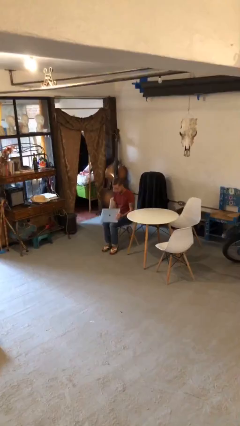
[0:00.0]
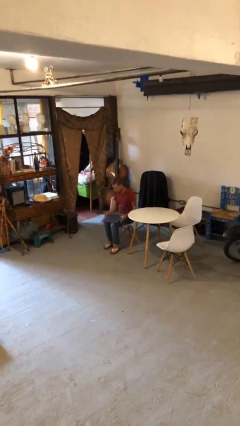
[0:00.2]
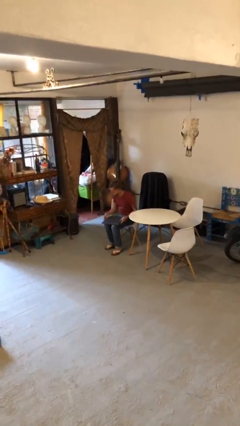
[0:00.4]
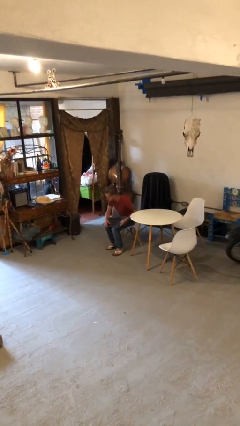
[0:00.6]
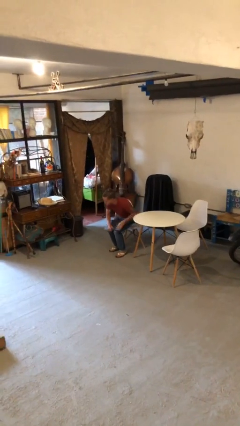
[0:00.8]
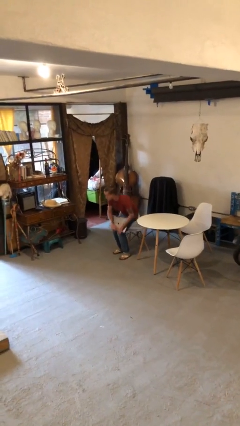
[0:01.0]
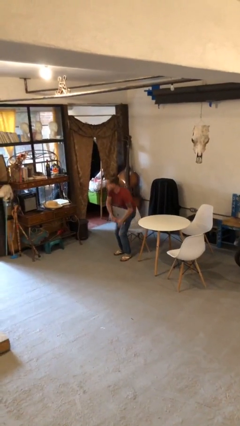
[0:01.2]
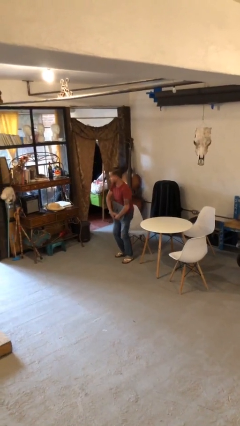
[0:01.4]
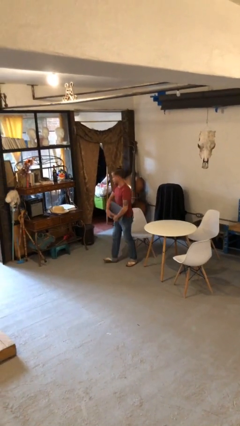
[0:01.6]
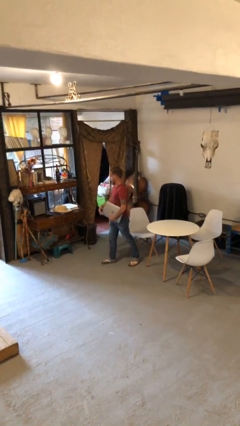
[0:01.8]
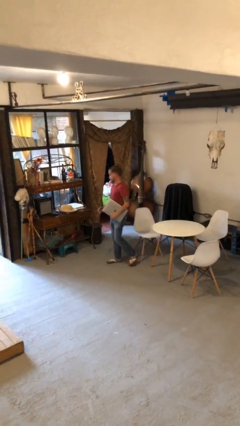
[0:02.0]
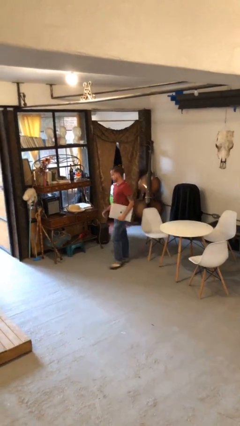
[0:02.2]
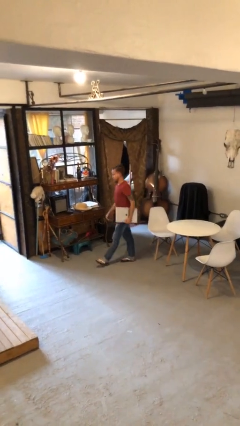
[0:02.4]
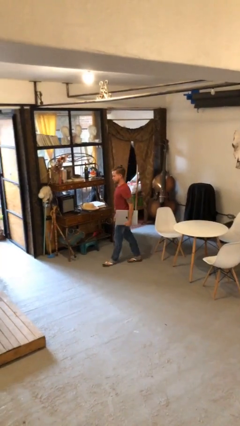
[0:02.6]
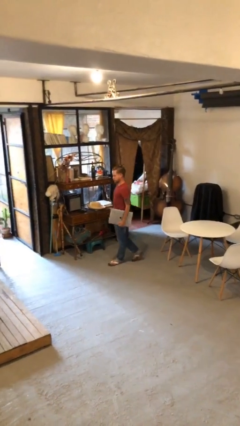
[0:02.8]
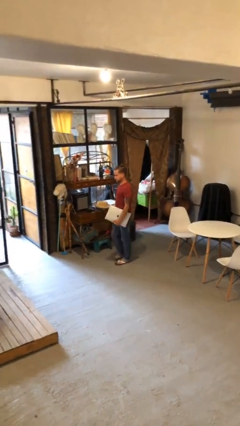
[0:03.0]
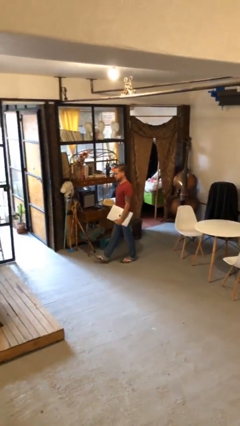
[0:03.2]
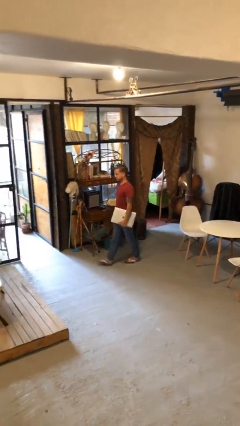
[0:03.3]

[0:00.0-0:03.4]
person stands up

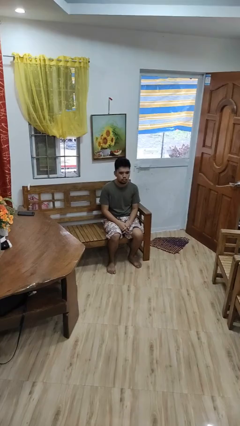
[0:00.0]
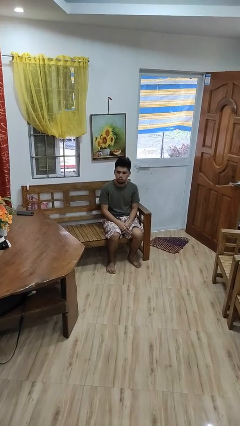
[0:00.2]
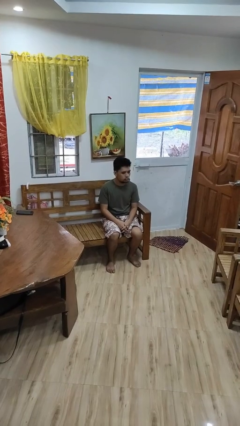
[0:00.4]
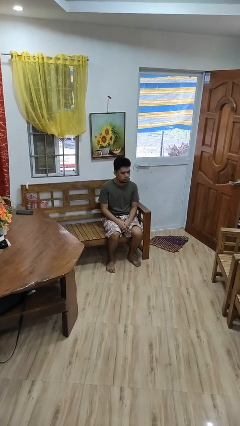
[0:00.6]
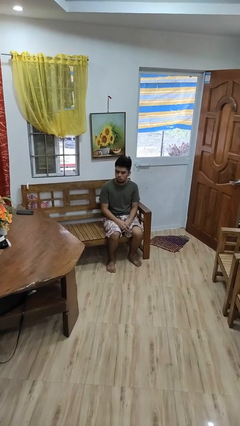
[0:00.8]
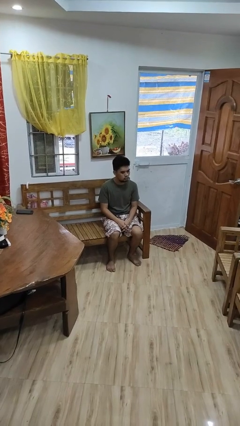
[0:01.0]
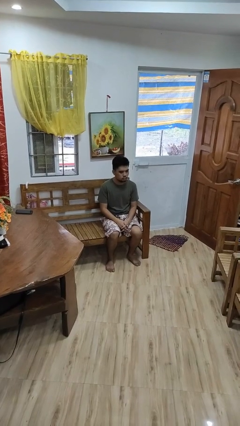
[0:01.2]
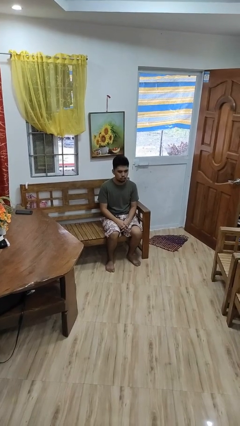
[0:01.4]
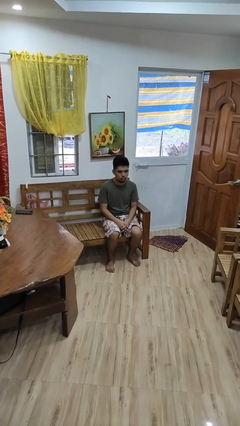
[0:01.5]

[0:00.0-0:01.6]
person shakes head

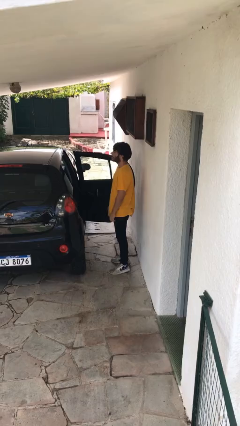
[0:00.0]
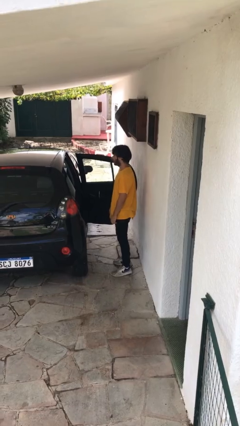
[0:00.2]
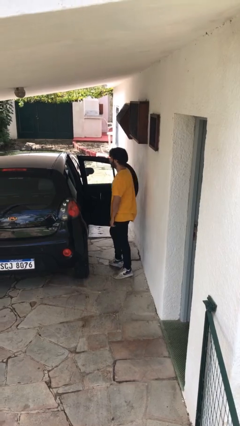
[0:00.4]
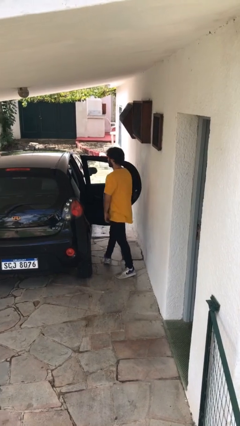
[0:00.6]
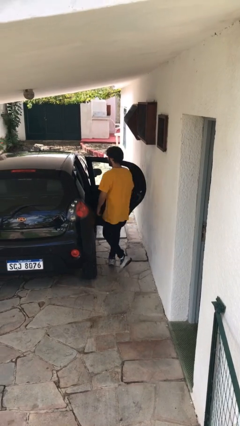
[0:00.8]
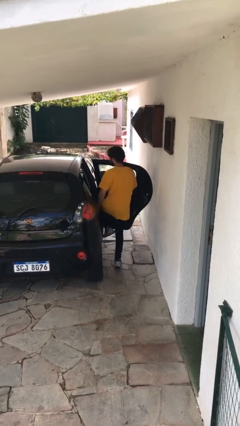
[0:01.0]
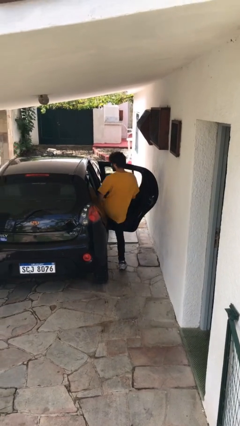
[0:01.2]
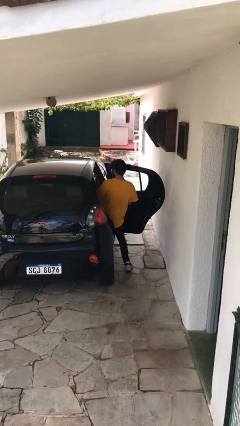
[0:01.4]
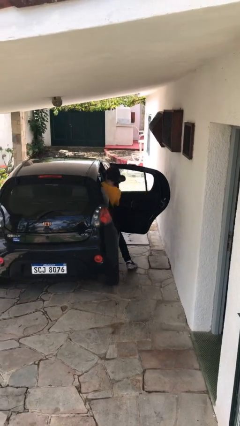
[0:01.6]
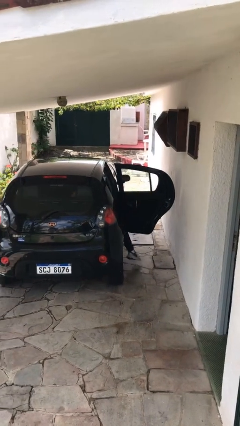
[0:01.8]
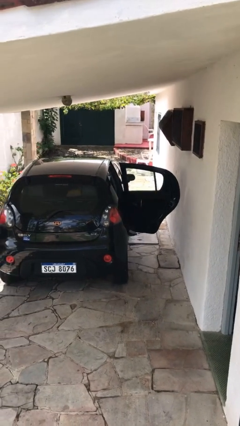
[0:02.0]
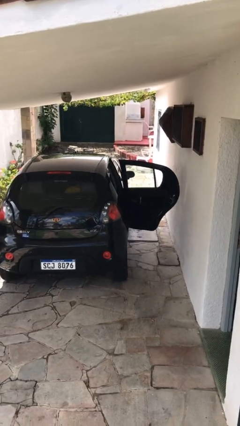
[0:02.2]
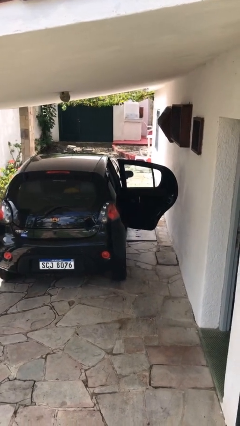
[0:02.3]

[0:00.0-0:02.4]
person enters car

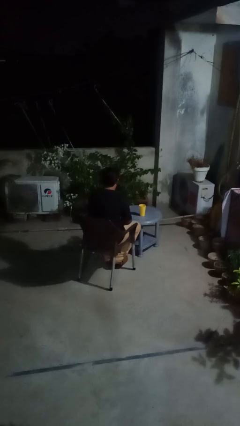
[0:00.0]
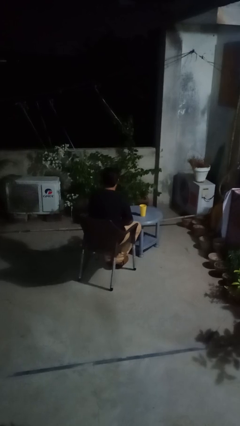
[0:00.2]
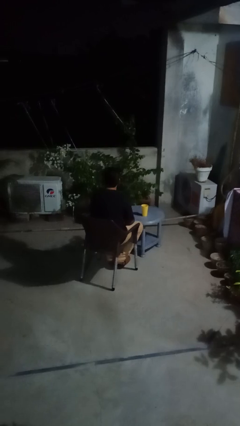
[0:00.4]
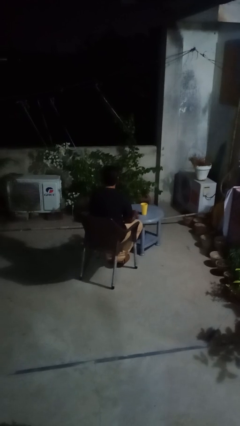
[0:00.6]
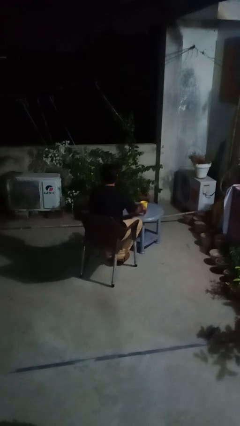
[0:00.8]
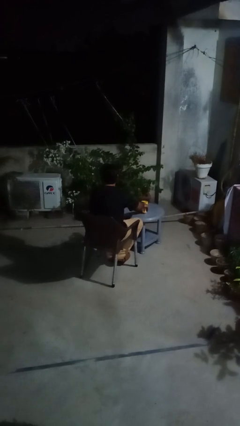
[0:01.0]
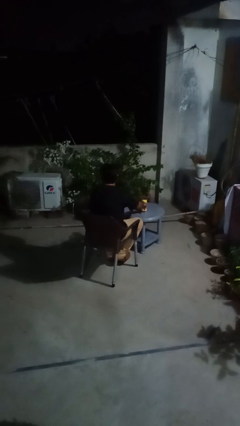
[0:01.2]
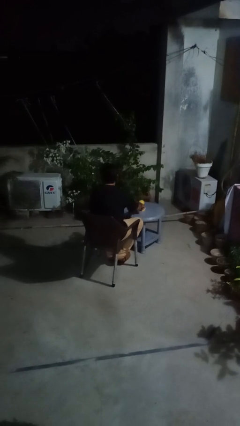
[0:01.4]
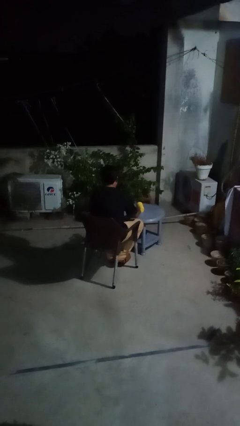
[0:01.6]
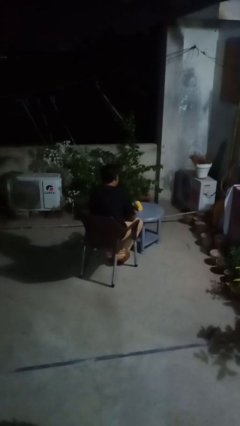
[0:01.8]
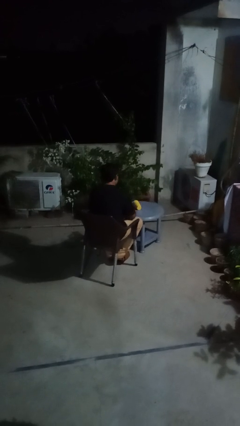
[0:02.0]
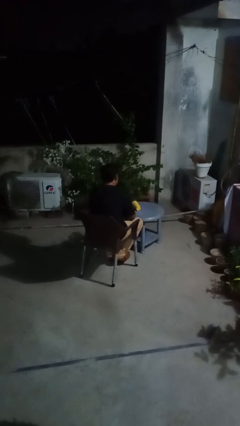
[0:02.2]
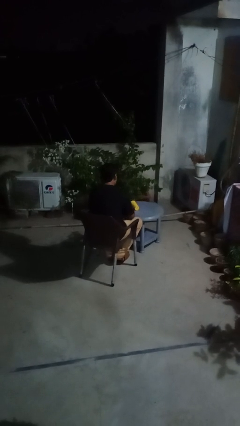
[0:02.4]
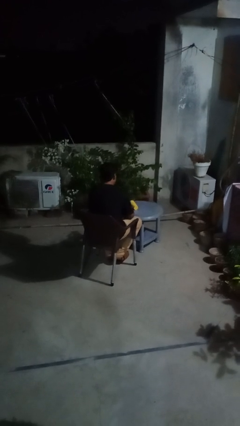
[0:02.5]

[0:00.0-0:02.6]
person knocks over glass

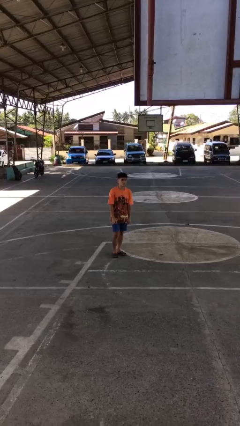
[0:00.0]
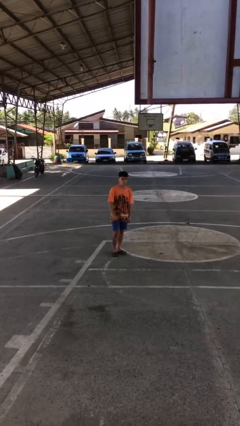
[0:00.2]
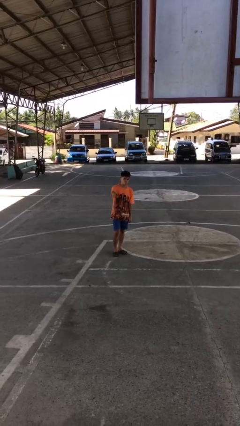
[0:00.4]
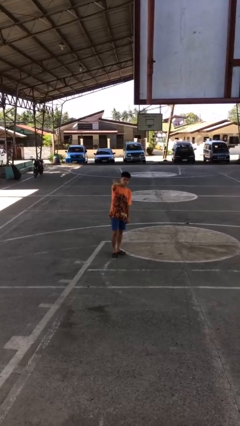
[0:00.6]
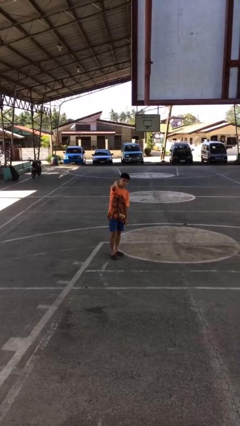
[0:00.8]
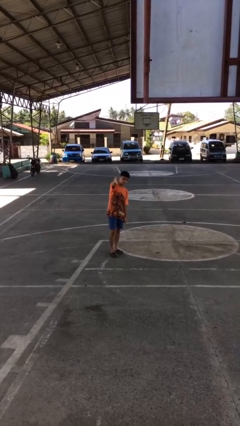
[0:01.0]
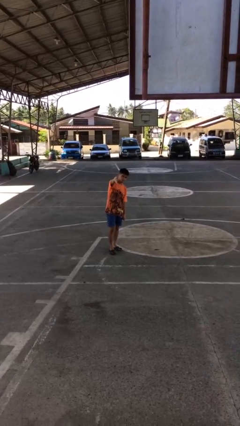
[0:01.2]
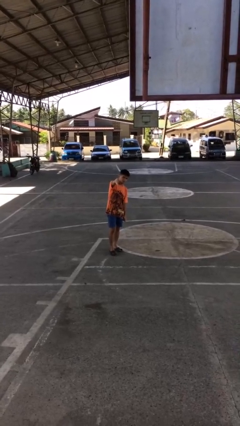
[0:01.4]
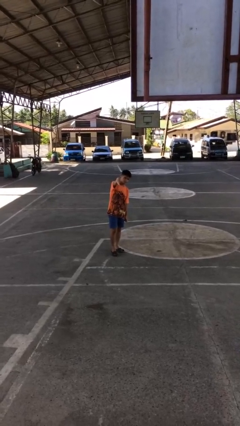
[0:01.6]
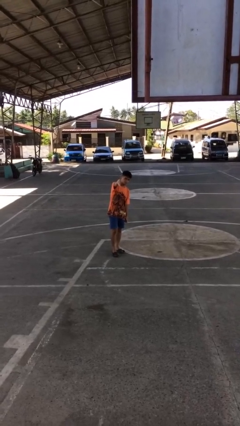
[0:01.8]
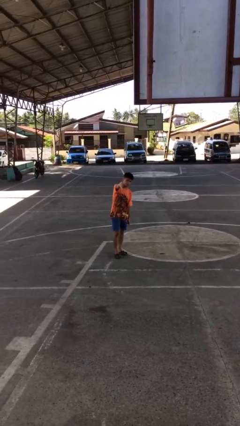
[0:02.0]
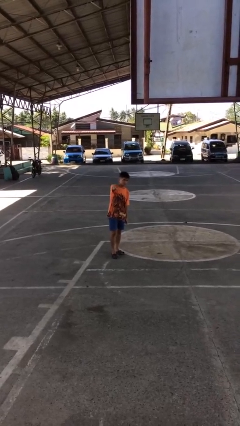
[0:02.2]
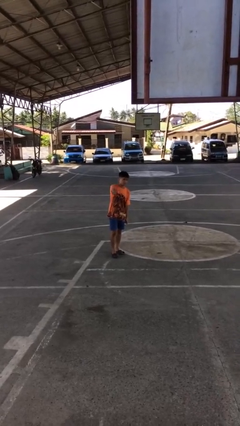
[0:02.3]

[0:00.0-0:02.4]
person gestures thumbs down

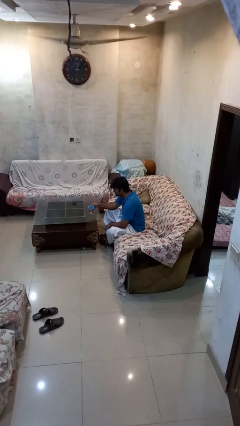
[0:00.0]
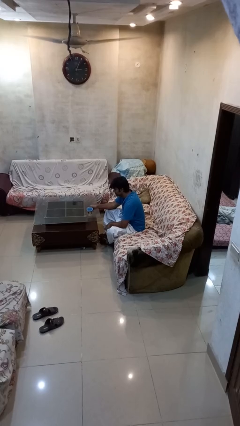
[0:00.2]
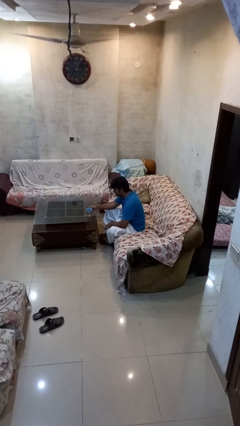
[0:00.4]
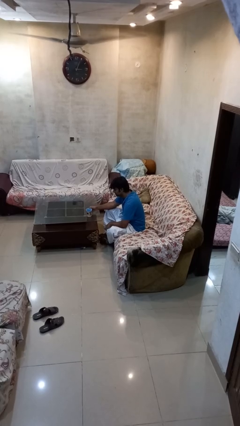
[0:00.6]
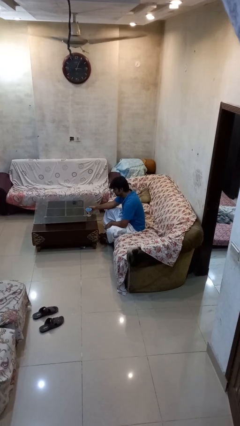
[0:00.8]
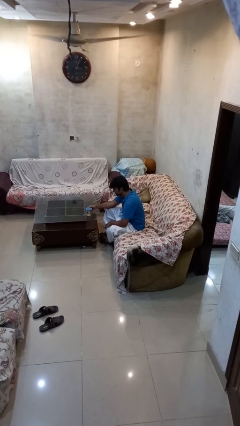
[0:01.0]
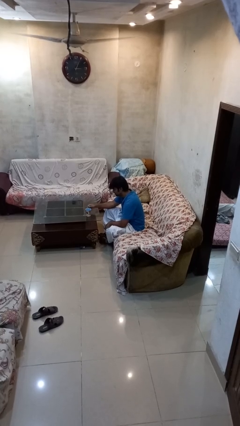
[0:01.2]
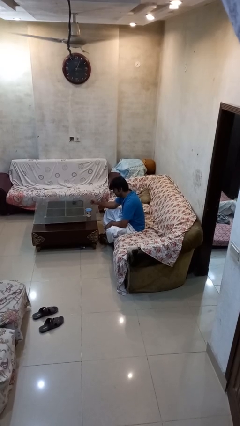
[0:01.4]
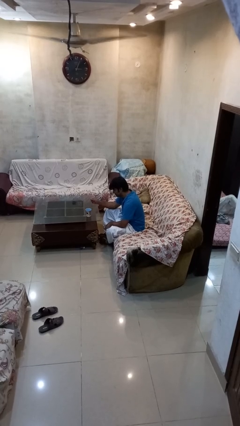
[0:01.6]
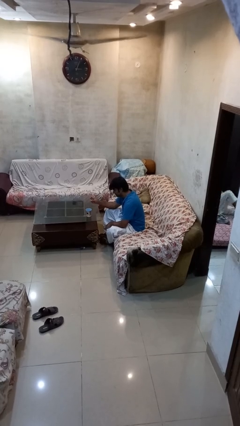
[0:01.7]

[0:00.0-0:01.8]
person puts down object on table

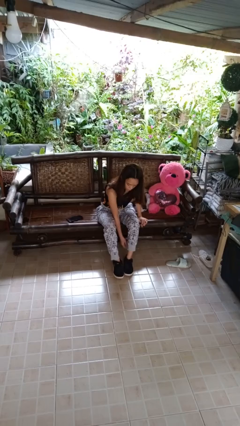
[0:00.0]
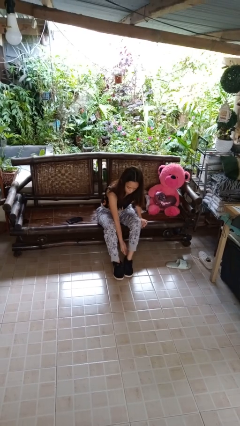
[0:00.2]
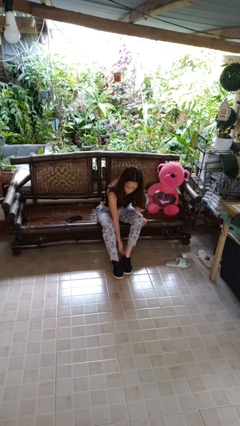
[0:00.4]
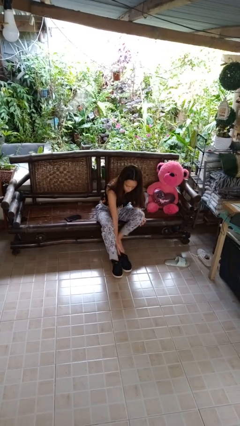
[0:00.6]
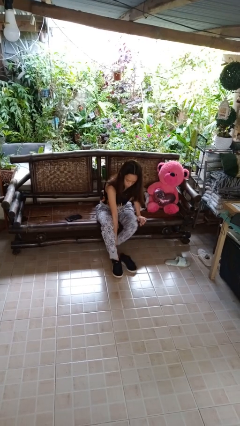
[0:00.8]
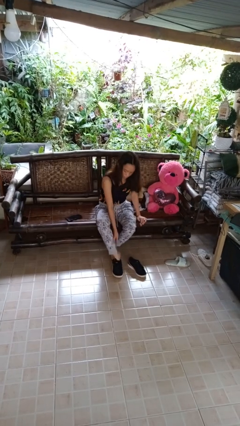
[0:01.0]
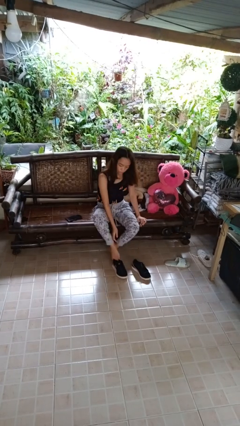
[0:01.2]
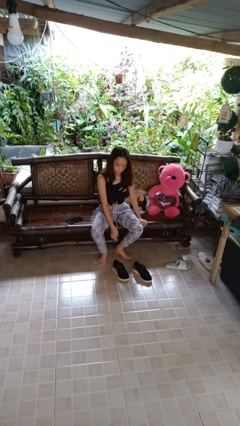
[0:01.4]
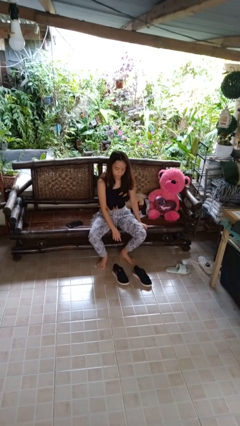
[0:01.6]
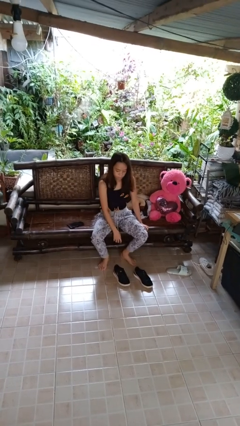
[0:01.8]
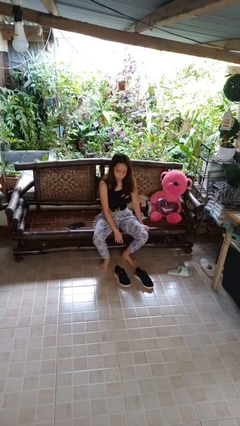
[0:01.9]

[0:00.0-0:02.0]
person takes off shoes

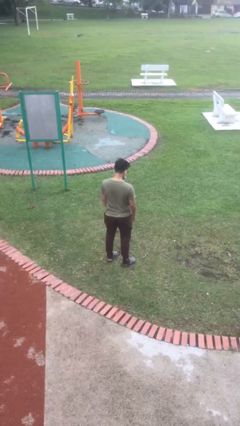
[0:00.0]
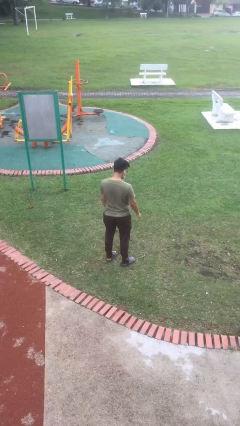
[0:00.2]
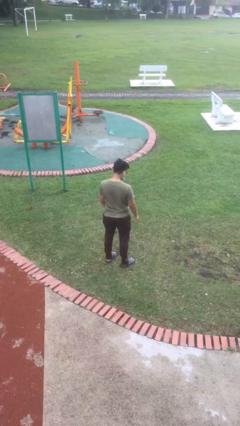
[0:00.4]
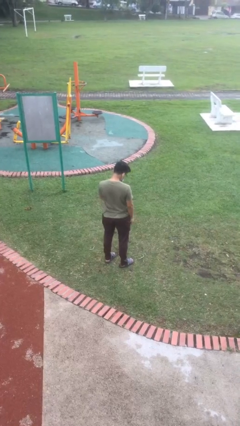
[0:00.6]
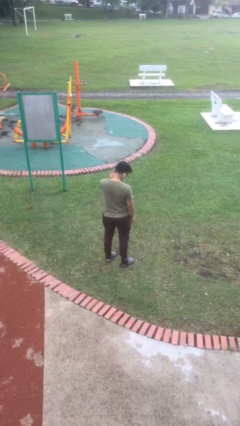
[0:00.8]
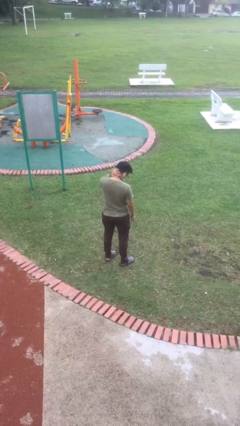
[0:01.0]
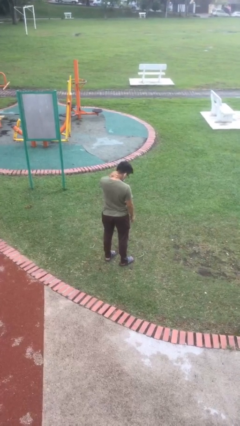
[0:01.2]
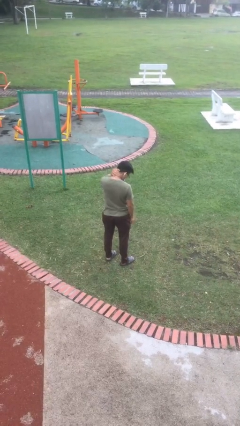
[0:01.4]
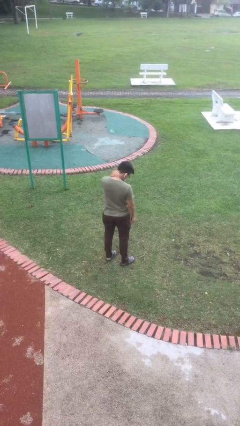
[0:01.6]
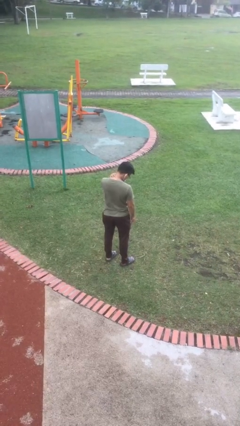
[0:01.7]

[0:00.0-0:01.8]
person rubs neck